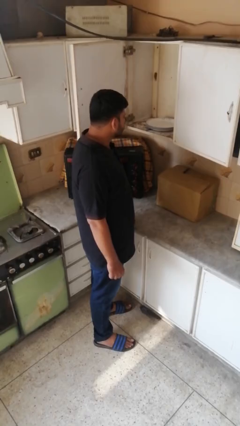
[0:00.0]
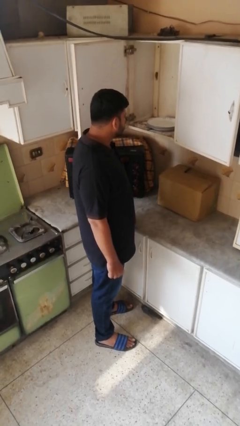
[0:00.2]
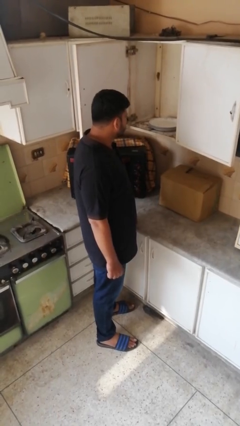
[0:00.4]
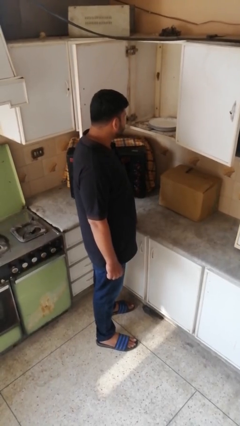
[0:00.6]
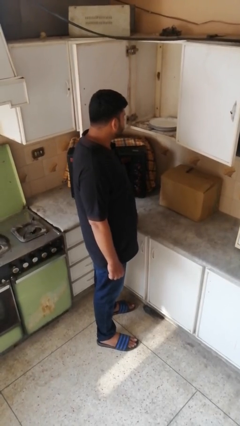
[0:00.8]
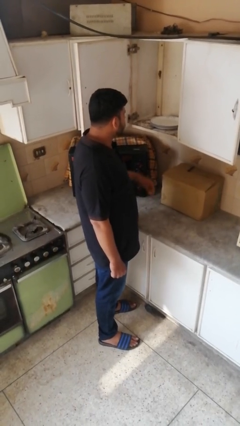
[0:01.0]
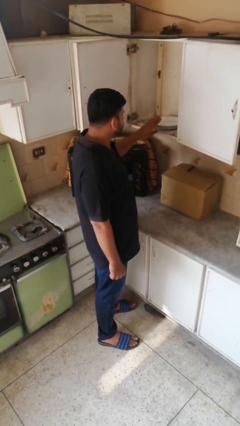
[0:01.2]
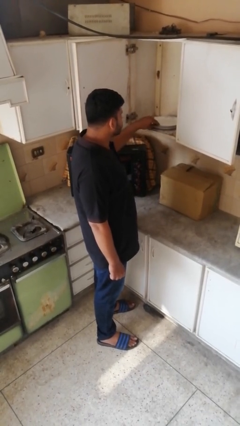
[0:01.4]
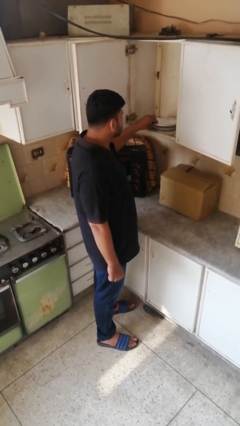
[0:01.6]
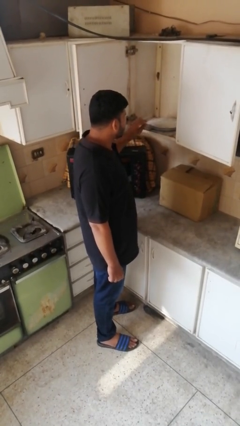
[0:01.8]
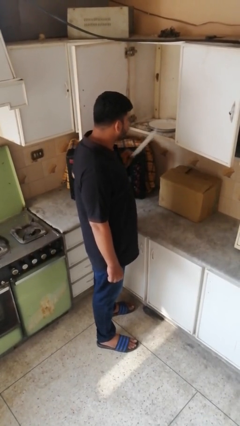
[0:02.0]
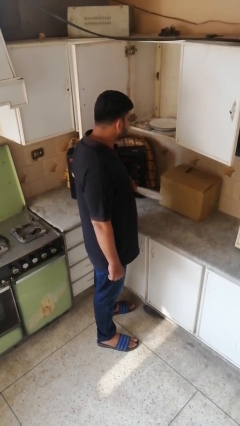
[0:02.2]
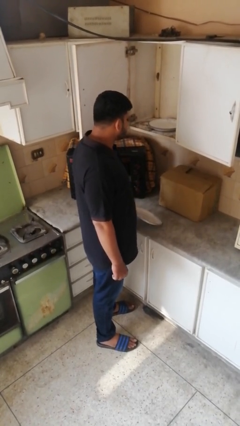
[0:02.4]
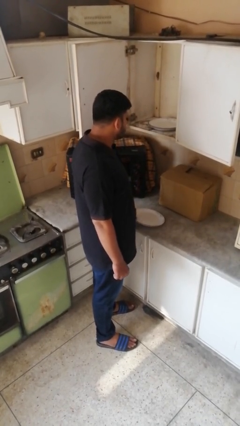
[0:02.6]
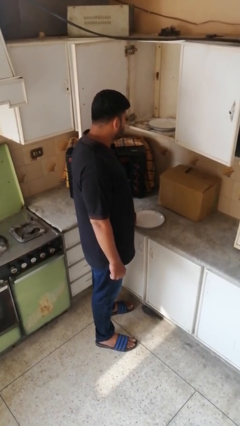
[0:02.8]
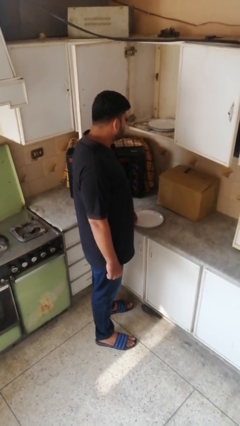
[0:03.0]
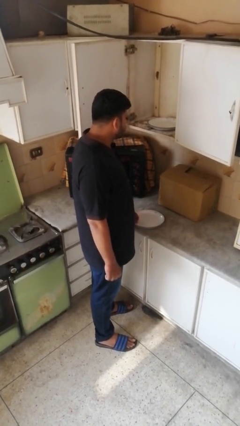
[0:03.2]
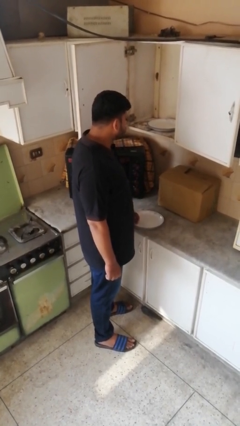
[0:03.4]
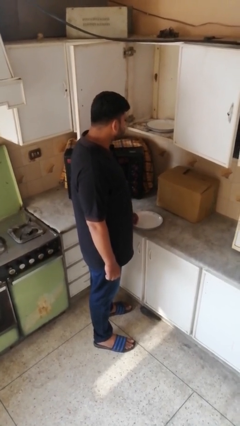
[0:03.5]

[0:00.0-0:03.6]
person takes object from cabinet

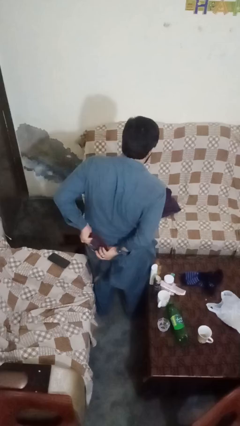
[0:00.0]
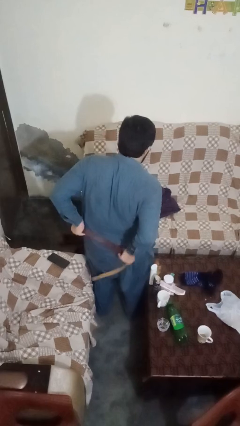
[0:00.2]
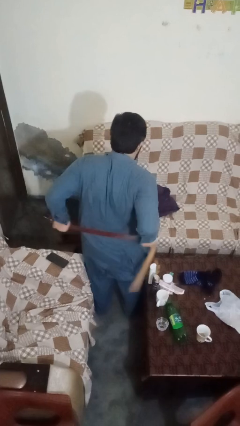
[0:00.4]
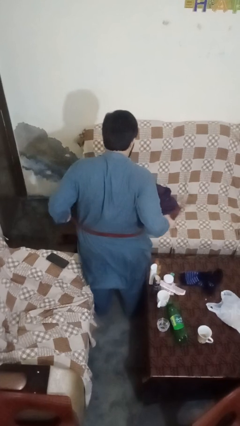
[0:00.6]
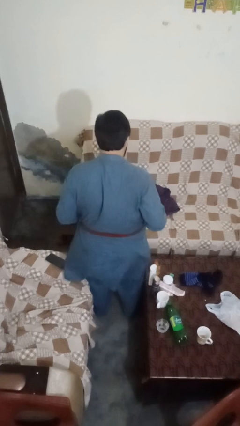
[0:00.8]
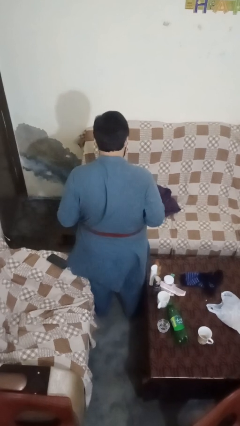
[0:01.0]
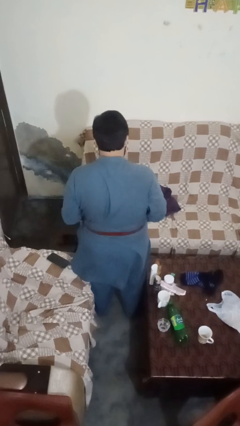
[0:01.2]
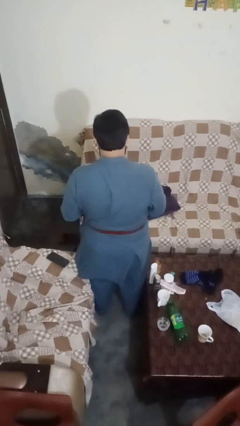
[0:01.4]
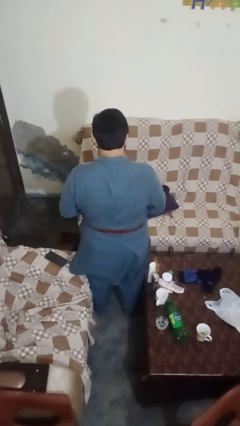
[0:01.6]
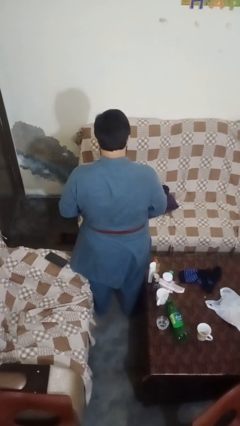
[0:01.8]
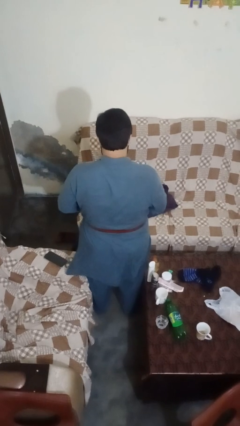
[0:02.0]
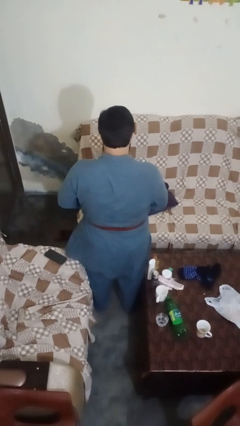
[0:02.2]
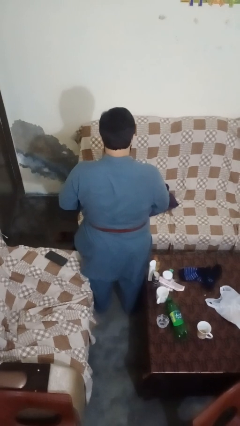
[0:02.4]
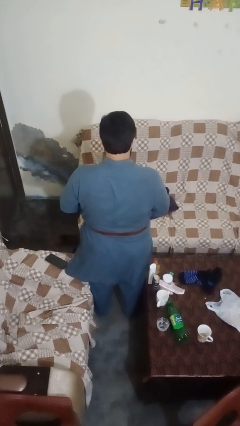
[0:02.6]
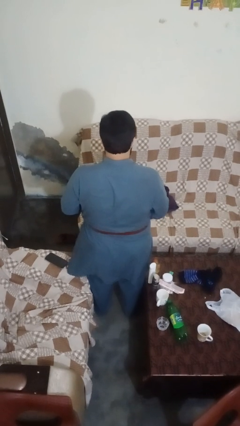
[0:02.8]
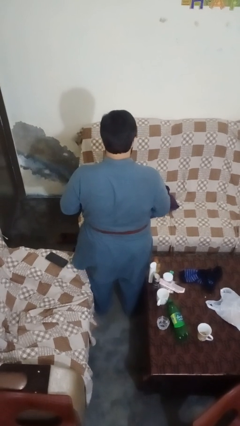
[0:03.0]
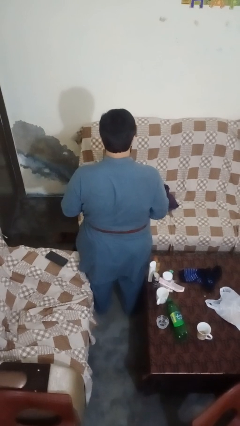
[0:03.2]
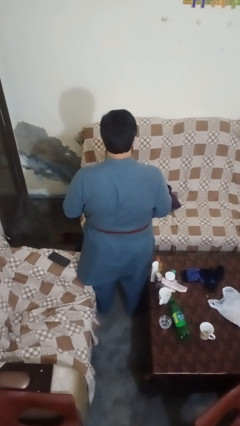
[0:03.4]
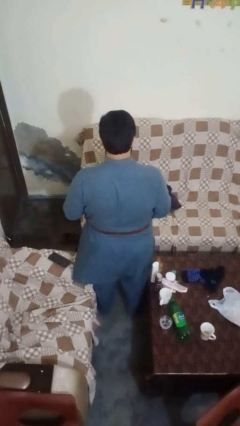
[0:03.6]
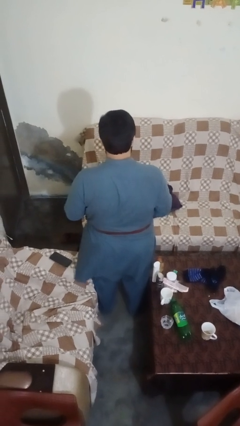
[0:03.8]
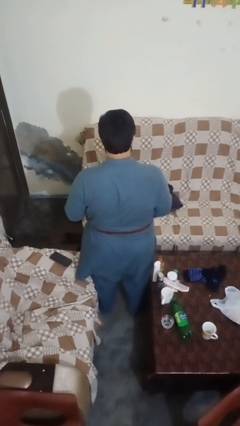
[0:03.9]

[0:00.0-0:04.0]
person puts on belt

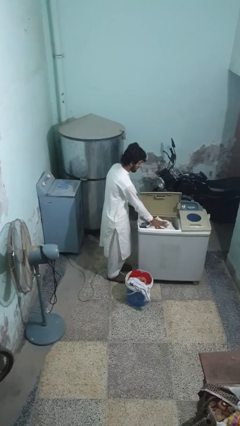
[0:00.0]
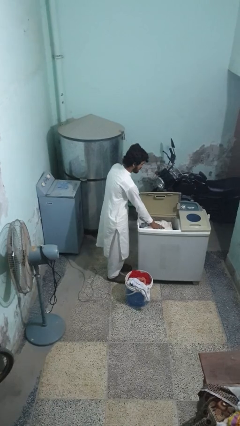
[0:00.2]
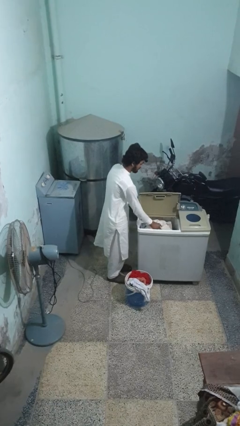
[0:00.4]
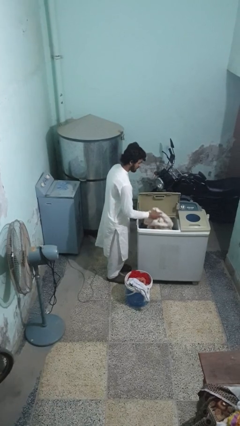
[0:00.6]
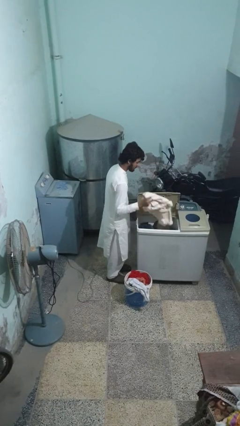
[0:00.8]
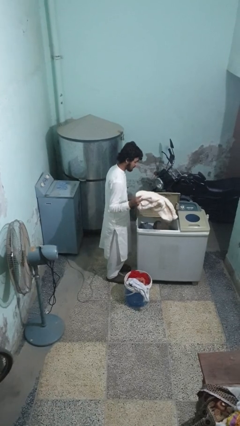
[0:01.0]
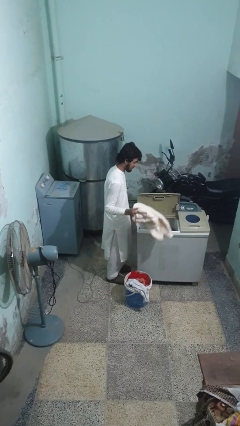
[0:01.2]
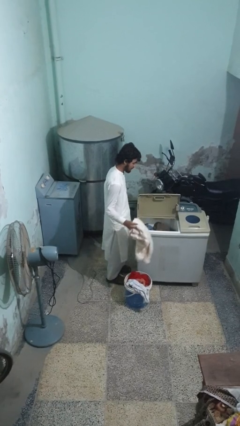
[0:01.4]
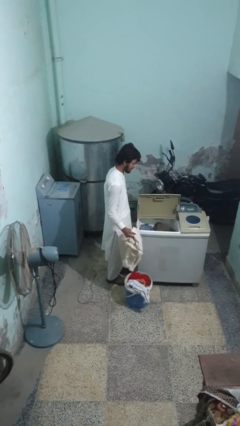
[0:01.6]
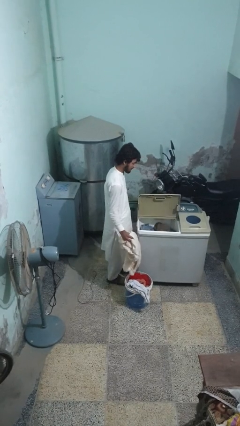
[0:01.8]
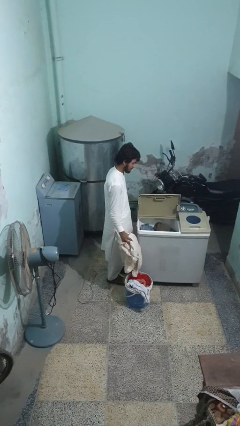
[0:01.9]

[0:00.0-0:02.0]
person unloads clotheswasher

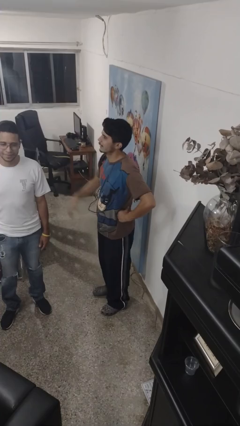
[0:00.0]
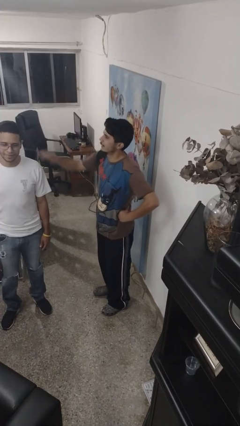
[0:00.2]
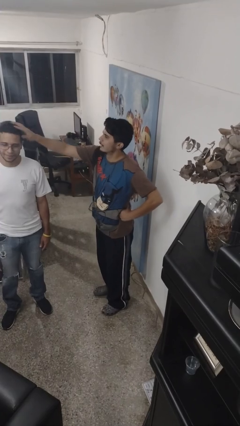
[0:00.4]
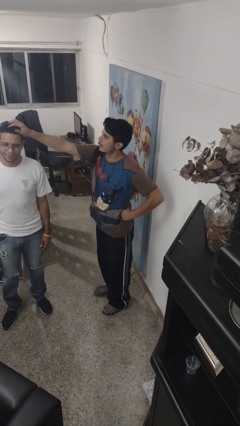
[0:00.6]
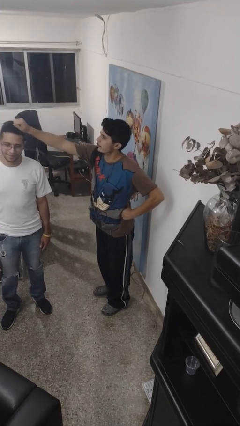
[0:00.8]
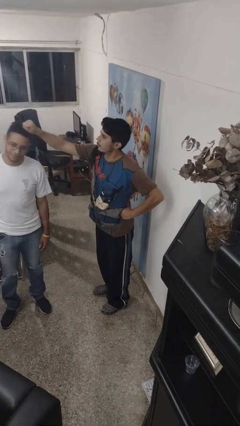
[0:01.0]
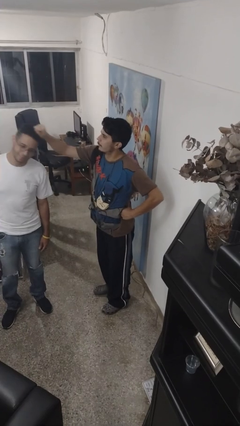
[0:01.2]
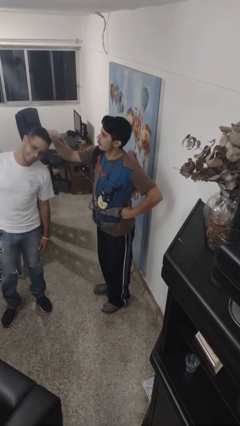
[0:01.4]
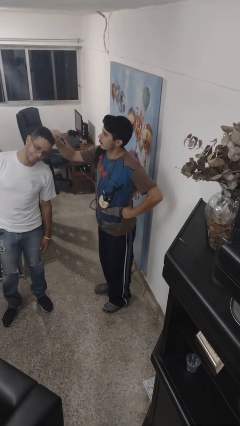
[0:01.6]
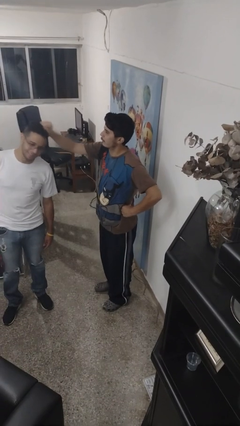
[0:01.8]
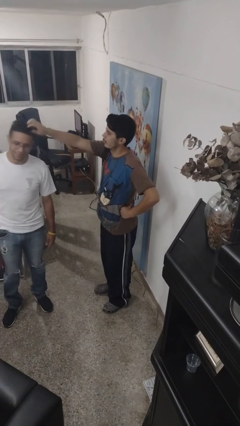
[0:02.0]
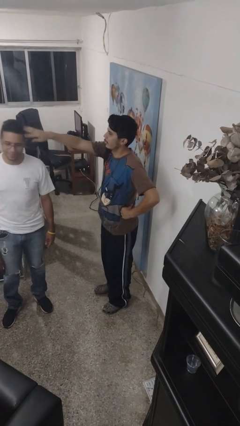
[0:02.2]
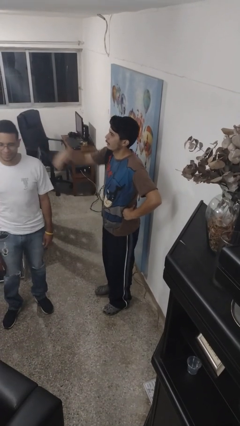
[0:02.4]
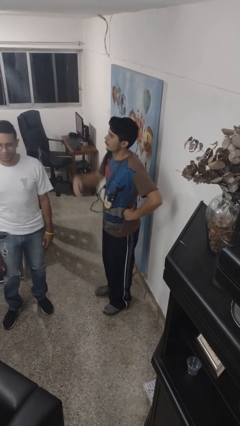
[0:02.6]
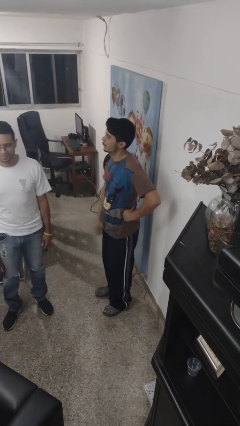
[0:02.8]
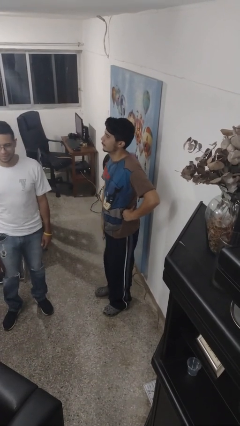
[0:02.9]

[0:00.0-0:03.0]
person grabs person by hair

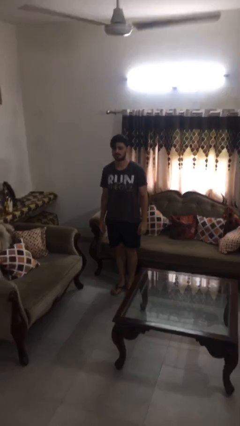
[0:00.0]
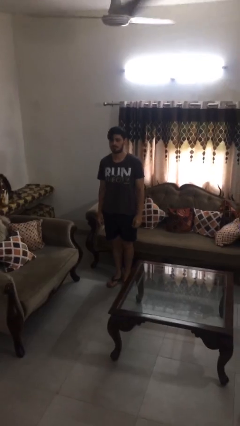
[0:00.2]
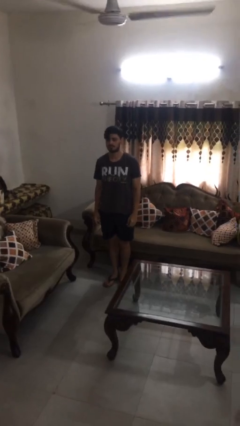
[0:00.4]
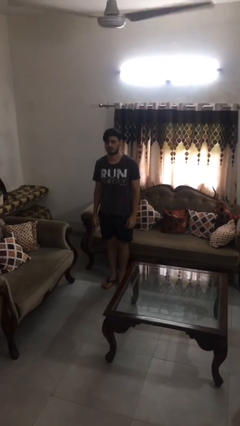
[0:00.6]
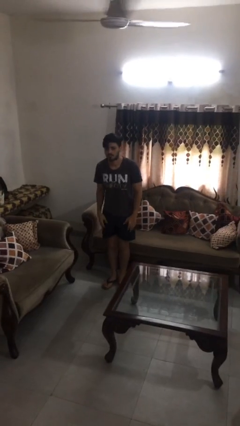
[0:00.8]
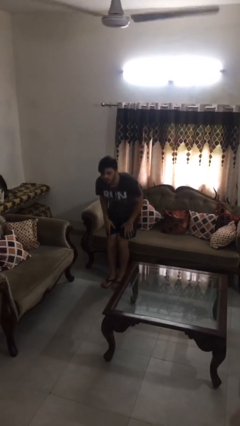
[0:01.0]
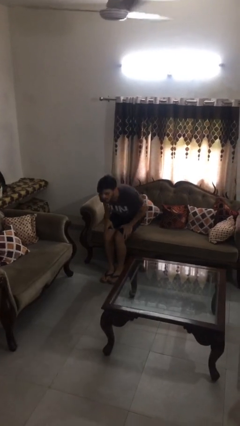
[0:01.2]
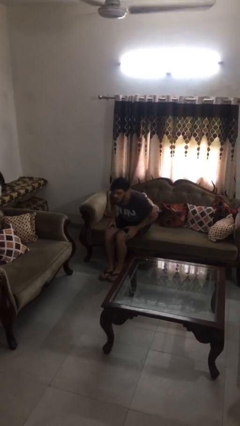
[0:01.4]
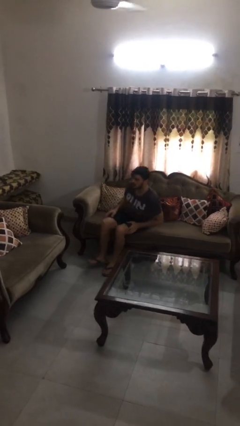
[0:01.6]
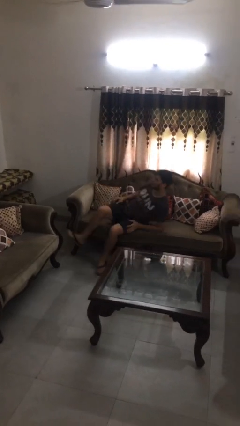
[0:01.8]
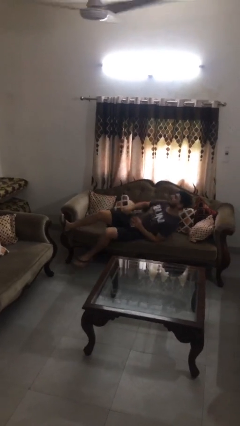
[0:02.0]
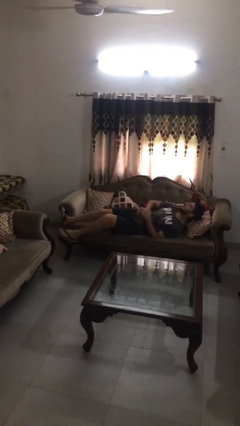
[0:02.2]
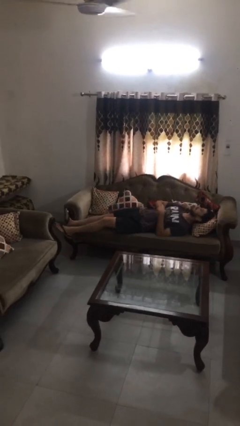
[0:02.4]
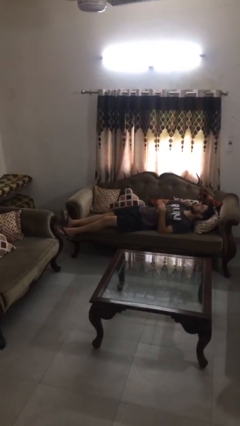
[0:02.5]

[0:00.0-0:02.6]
person lies down on couch

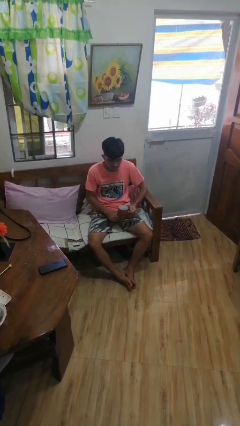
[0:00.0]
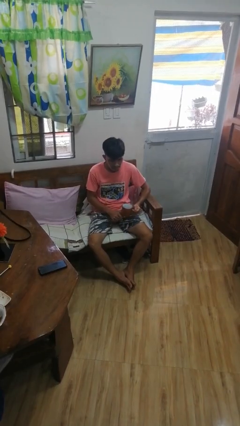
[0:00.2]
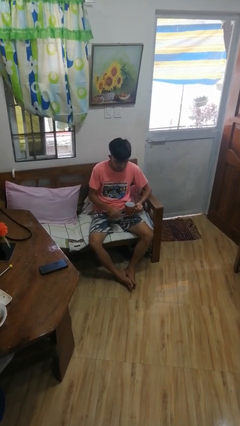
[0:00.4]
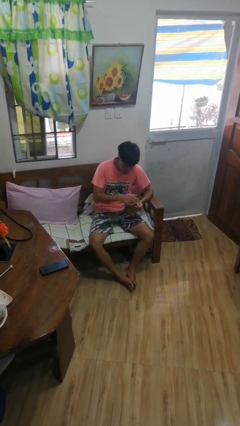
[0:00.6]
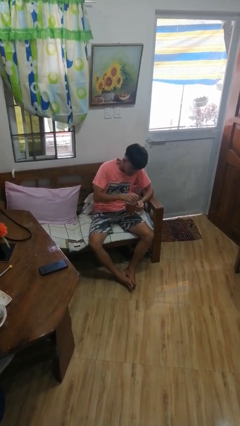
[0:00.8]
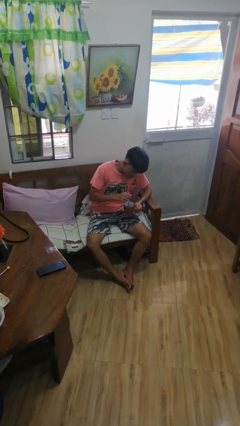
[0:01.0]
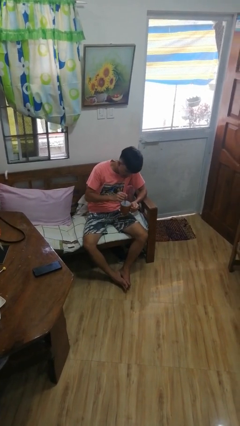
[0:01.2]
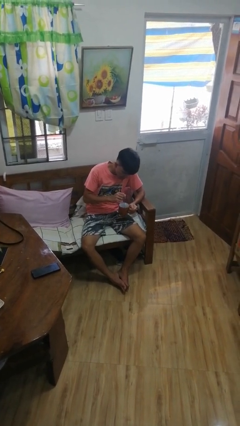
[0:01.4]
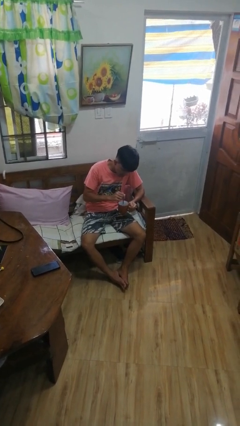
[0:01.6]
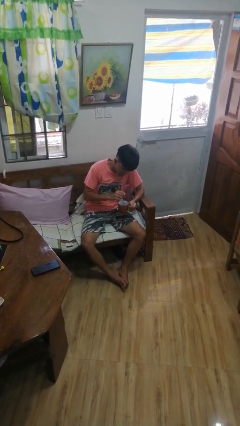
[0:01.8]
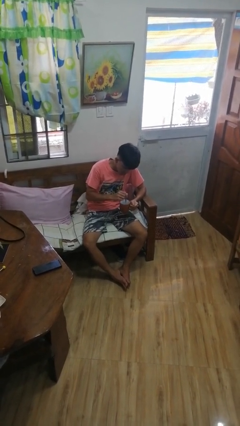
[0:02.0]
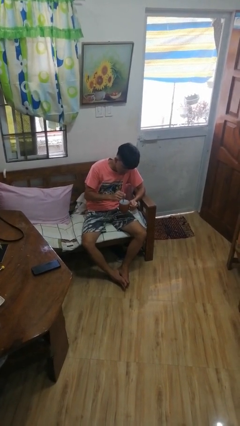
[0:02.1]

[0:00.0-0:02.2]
person stirs mug

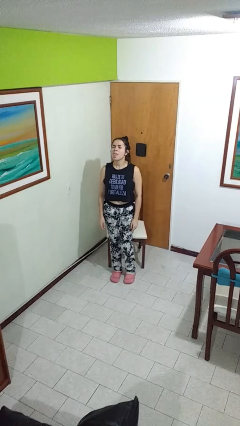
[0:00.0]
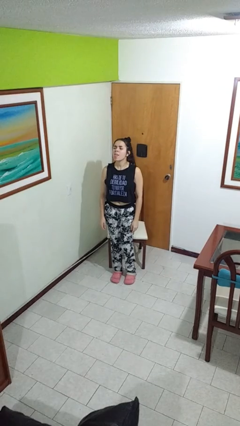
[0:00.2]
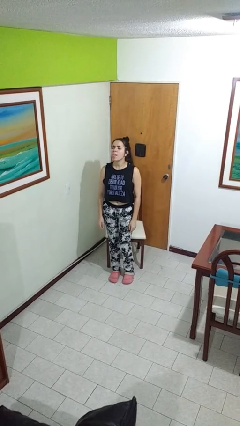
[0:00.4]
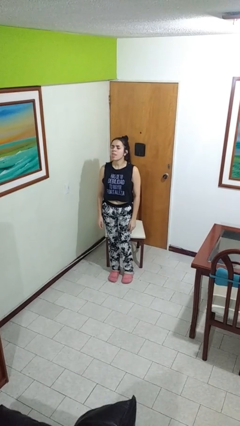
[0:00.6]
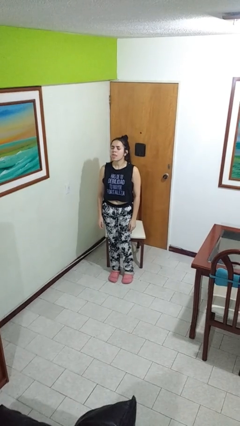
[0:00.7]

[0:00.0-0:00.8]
person sticks out tongue
